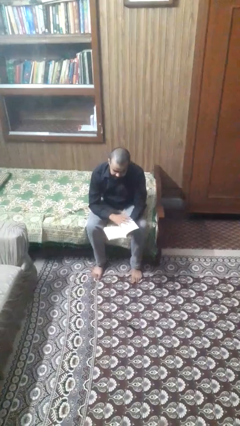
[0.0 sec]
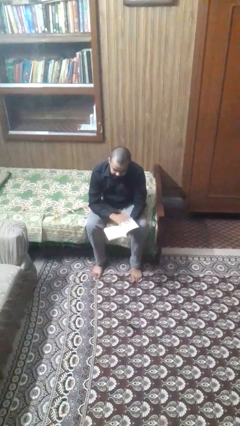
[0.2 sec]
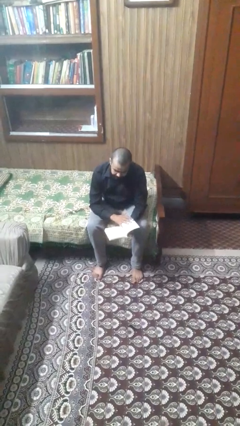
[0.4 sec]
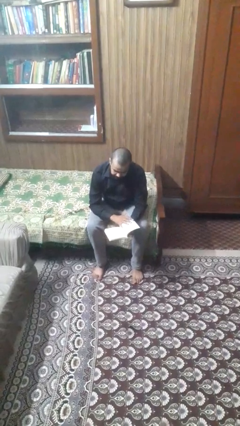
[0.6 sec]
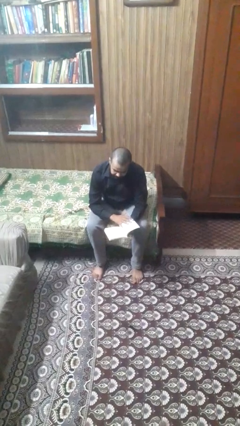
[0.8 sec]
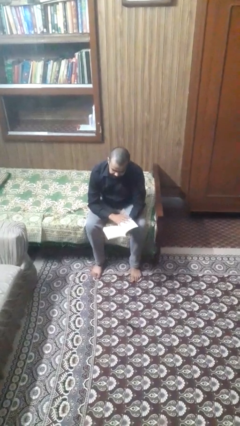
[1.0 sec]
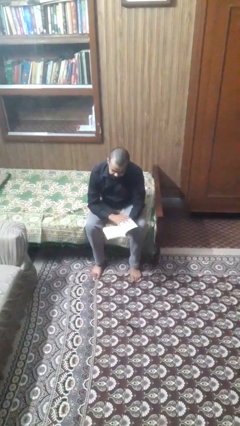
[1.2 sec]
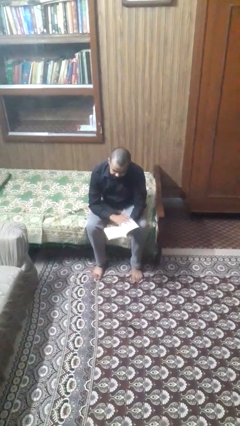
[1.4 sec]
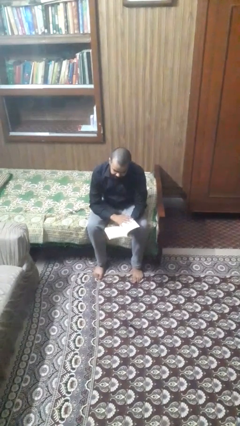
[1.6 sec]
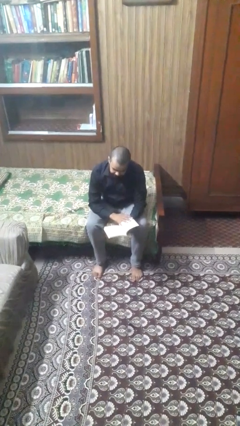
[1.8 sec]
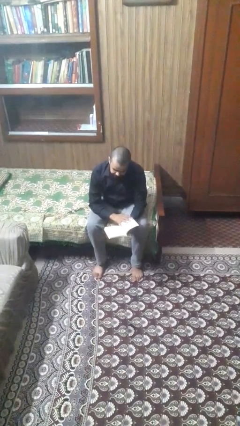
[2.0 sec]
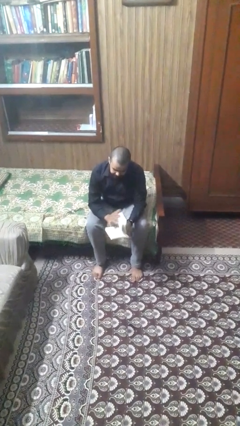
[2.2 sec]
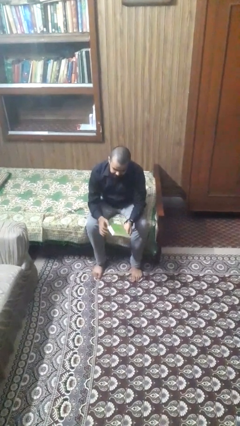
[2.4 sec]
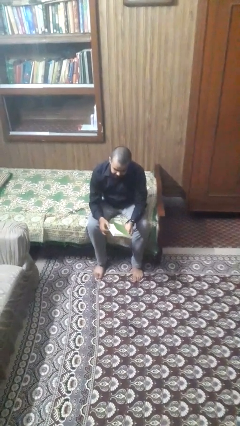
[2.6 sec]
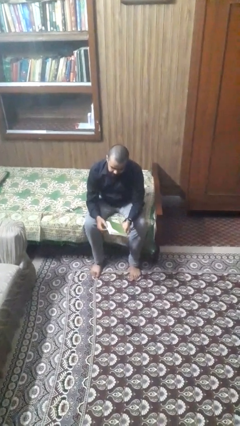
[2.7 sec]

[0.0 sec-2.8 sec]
person reads magazine

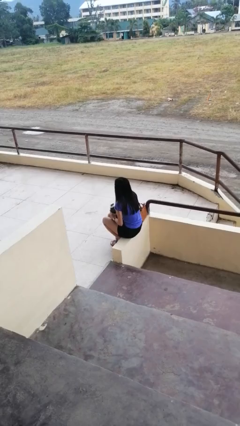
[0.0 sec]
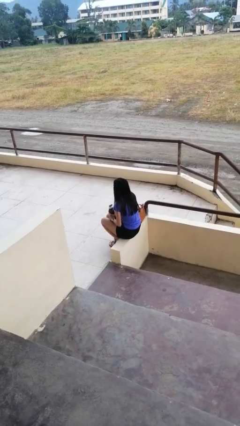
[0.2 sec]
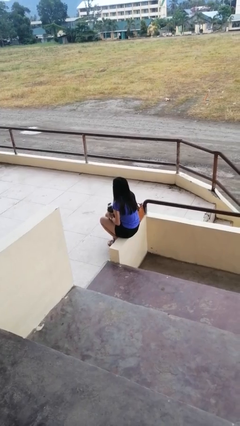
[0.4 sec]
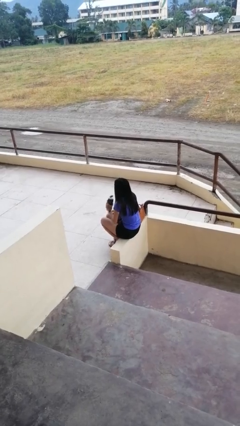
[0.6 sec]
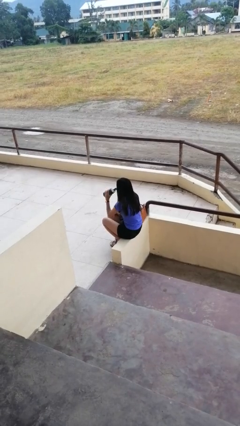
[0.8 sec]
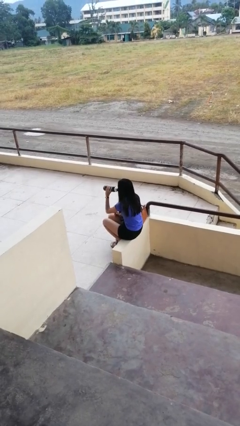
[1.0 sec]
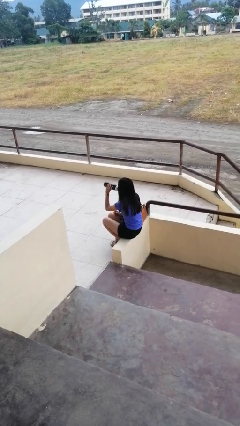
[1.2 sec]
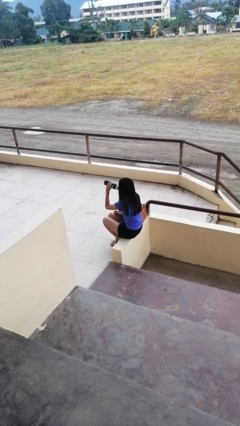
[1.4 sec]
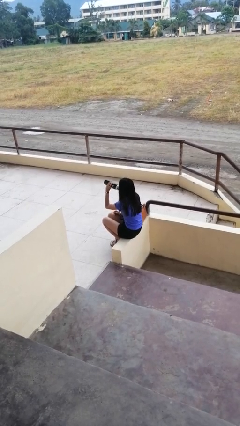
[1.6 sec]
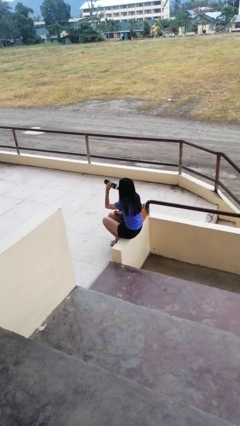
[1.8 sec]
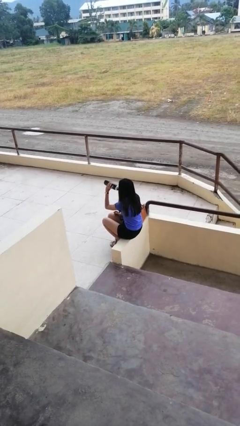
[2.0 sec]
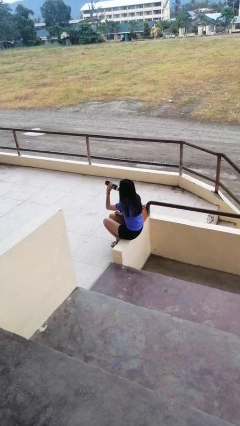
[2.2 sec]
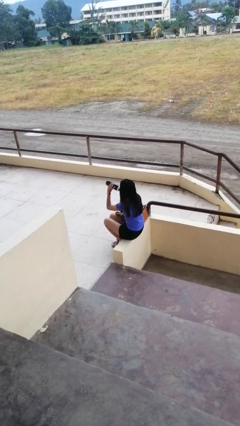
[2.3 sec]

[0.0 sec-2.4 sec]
person drinks from bottle

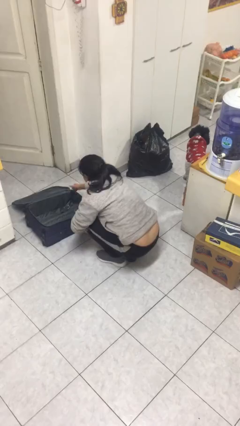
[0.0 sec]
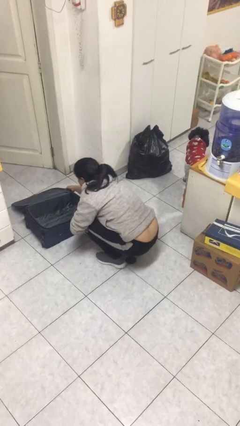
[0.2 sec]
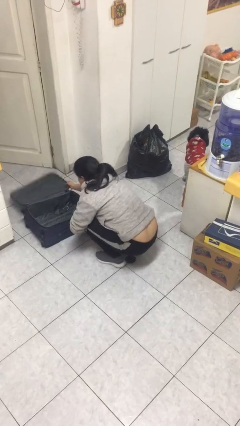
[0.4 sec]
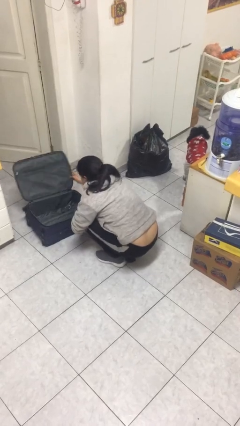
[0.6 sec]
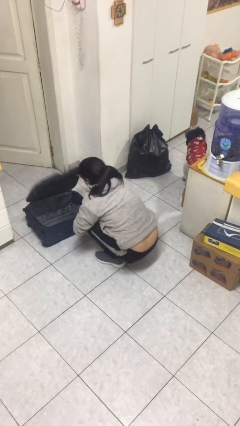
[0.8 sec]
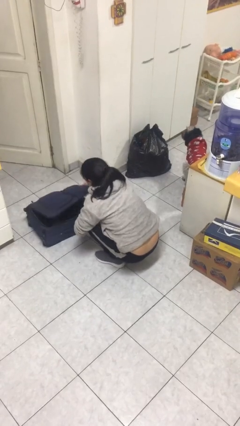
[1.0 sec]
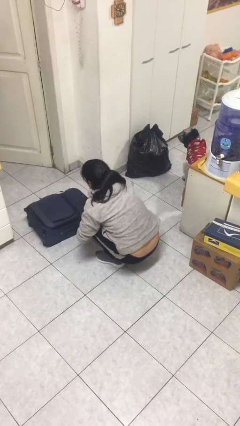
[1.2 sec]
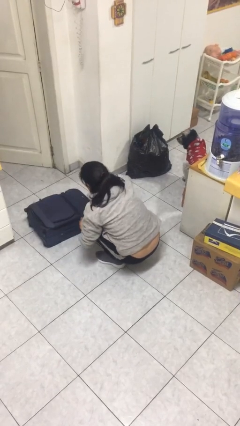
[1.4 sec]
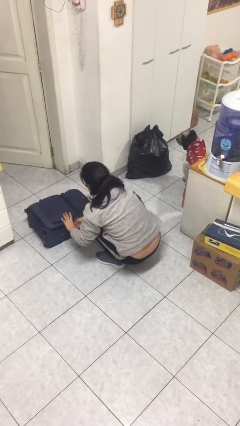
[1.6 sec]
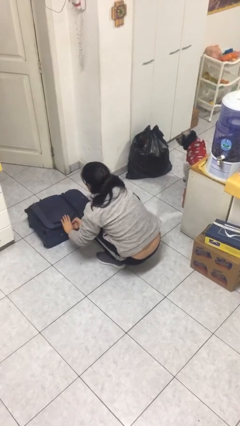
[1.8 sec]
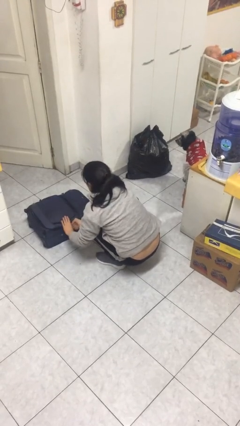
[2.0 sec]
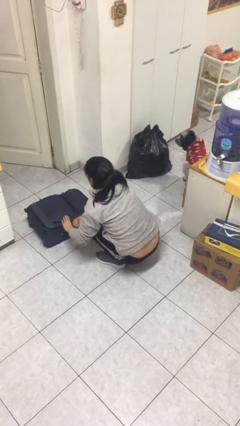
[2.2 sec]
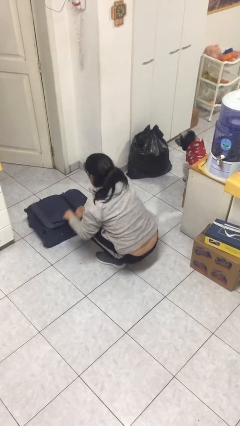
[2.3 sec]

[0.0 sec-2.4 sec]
person closes suitcase

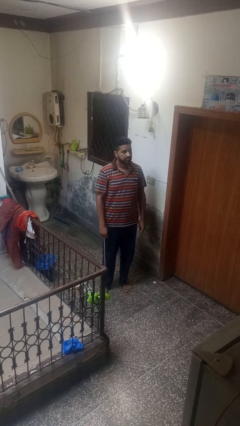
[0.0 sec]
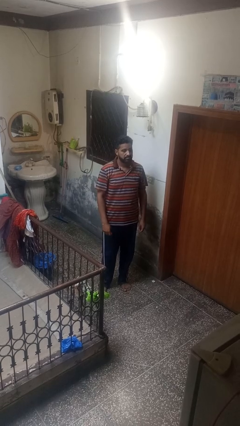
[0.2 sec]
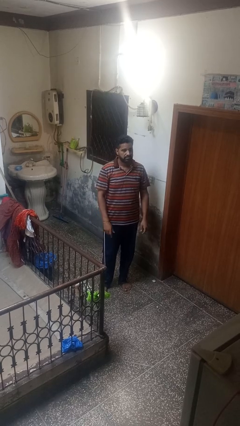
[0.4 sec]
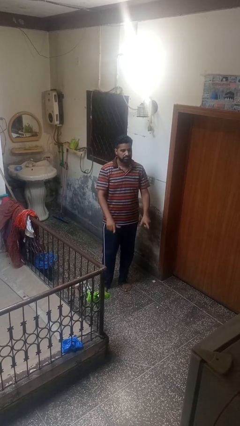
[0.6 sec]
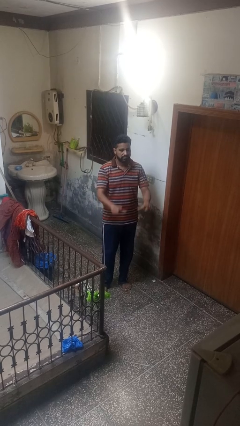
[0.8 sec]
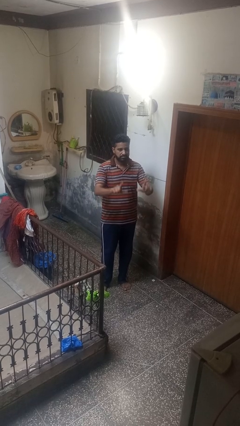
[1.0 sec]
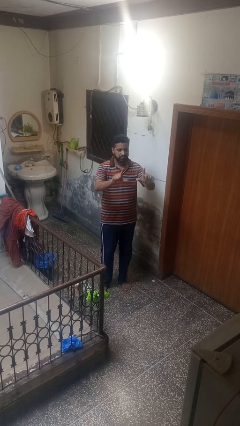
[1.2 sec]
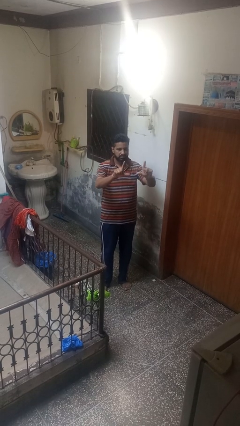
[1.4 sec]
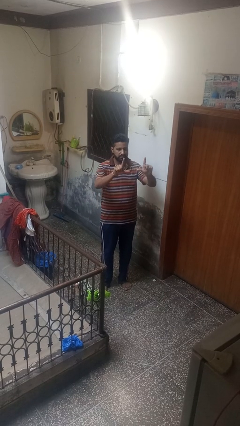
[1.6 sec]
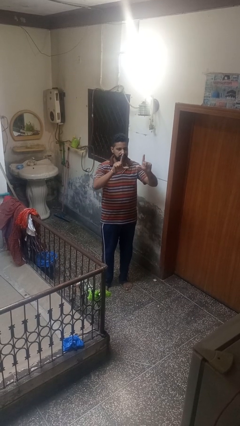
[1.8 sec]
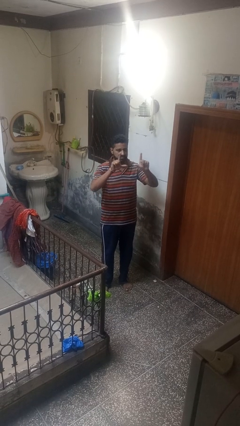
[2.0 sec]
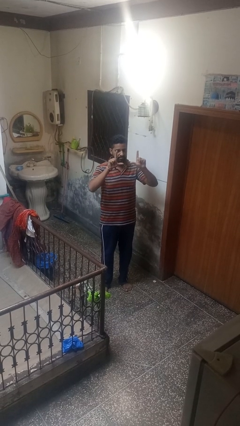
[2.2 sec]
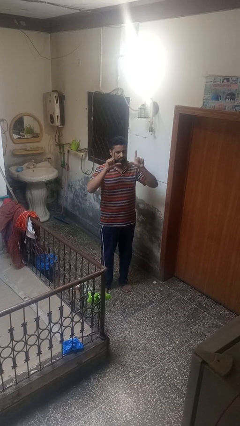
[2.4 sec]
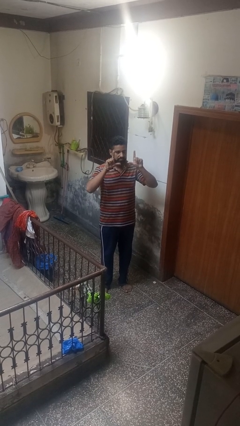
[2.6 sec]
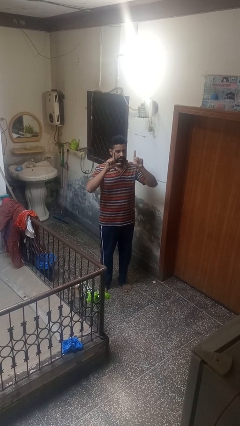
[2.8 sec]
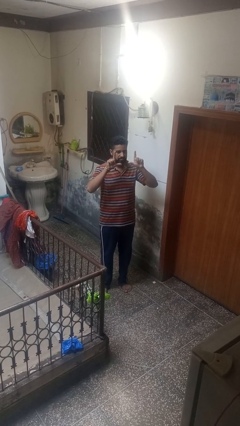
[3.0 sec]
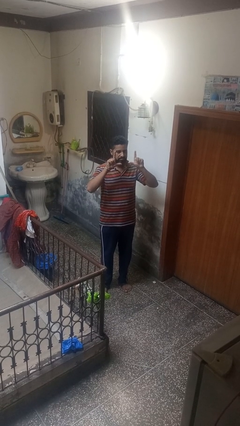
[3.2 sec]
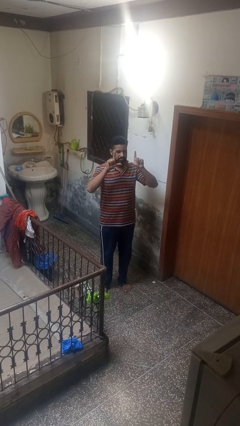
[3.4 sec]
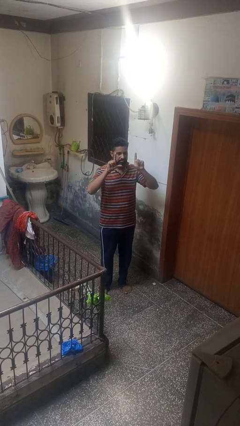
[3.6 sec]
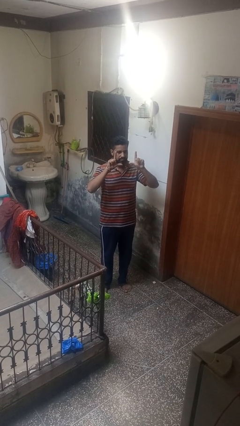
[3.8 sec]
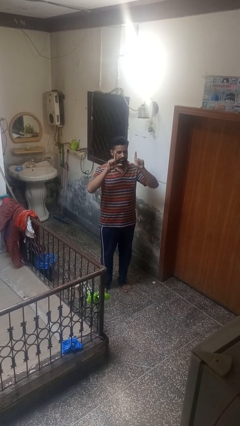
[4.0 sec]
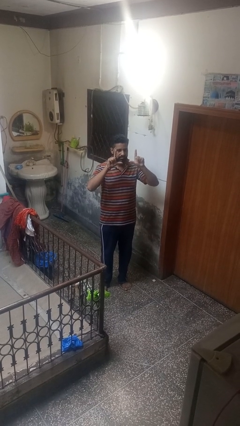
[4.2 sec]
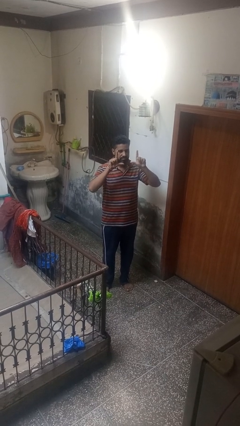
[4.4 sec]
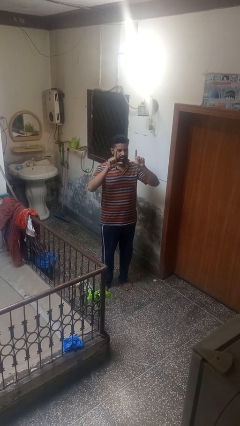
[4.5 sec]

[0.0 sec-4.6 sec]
person gestures zoom in

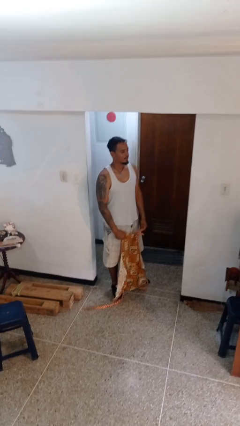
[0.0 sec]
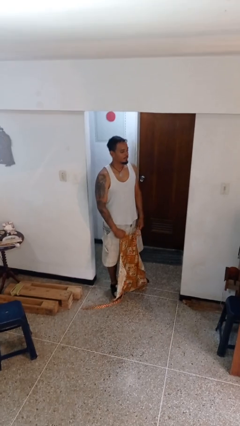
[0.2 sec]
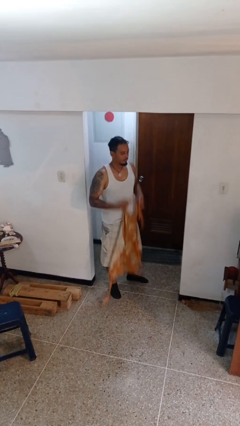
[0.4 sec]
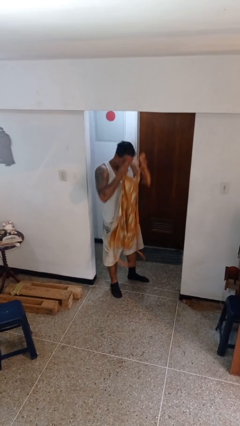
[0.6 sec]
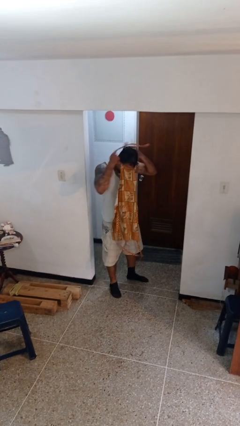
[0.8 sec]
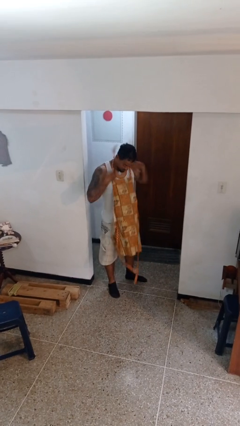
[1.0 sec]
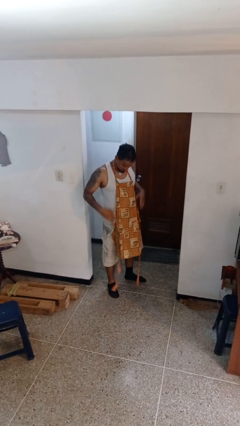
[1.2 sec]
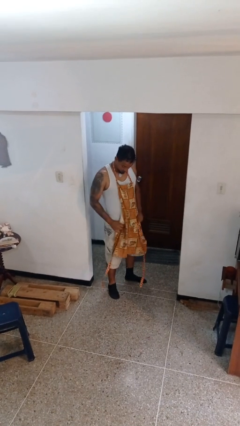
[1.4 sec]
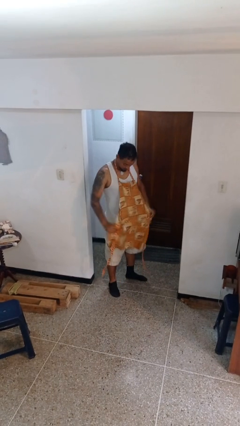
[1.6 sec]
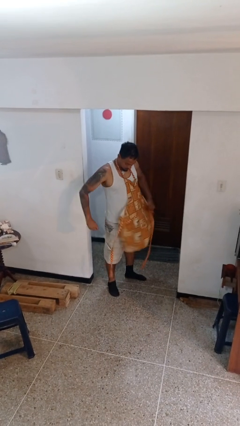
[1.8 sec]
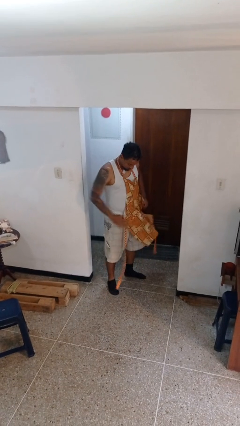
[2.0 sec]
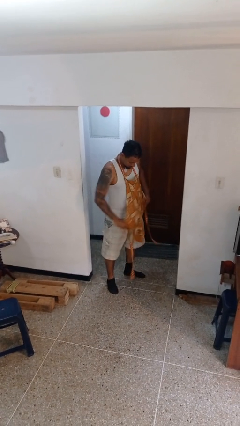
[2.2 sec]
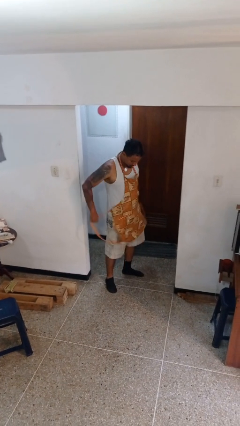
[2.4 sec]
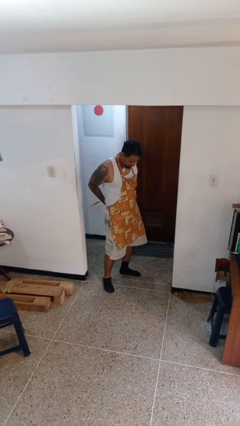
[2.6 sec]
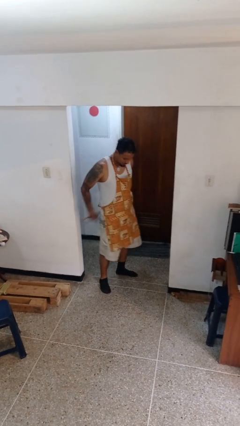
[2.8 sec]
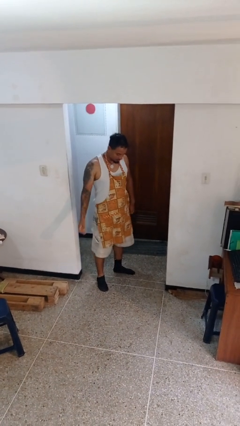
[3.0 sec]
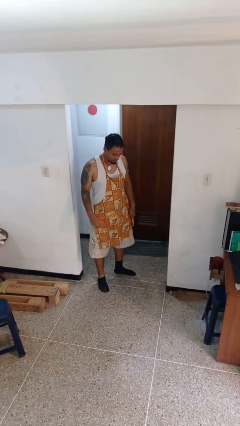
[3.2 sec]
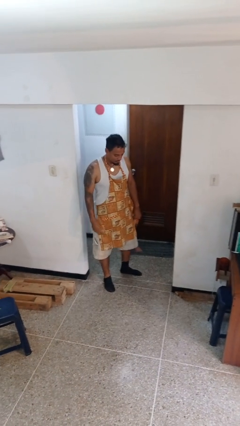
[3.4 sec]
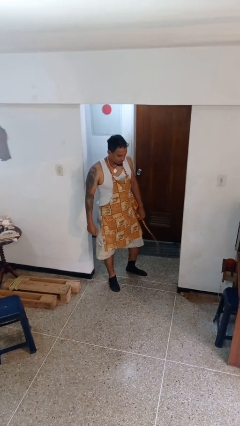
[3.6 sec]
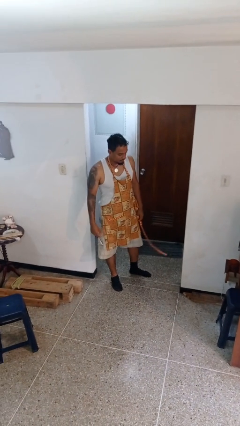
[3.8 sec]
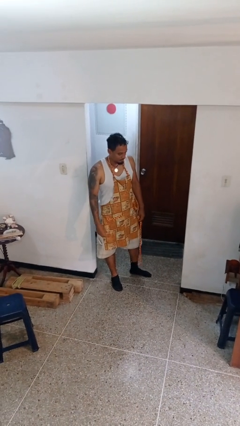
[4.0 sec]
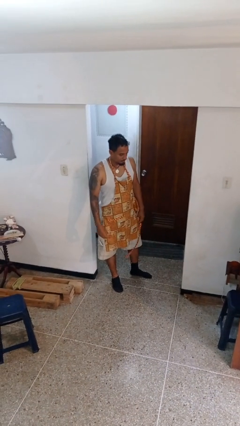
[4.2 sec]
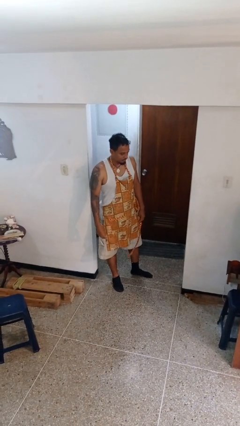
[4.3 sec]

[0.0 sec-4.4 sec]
person puts on apron

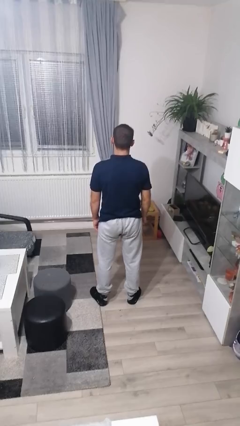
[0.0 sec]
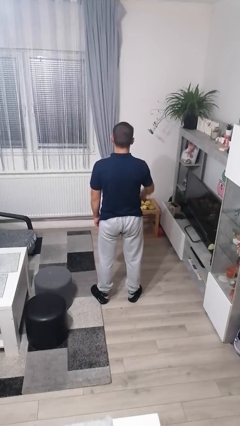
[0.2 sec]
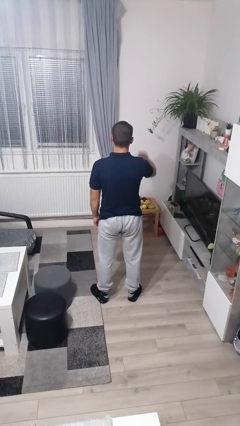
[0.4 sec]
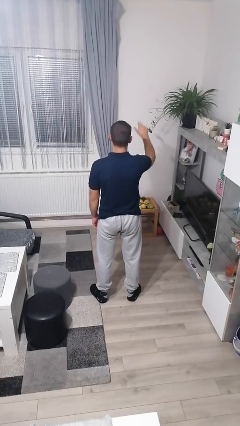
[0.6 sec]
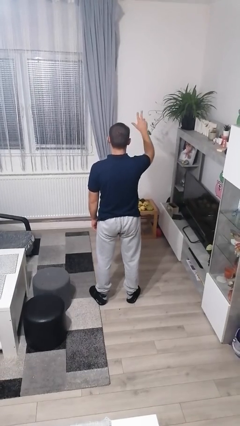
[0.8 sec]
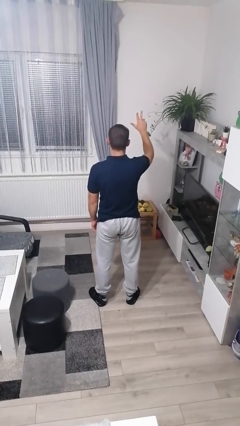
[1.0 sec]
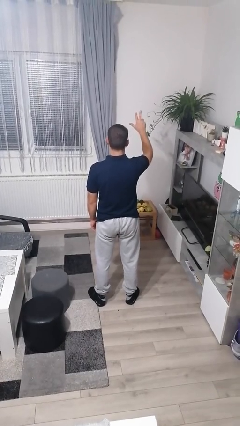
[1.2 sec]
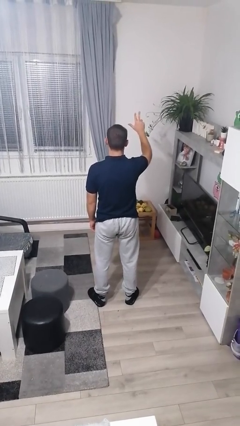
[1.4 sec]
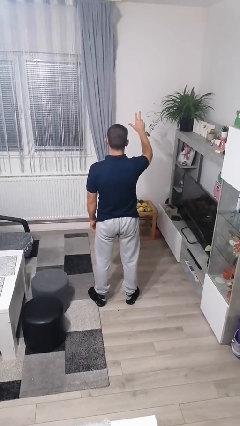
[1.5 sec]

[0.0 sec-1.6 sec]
person gestures number three
